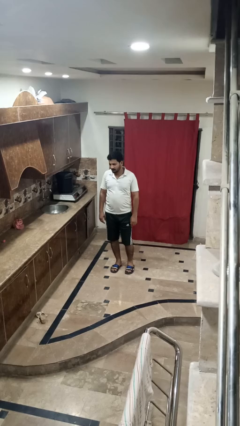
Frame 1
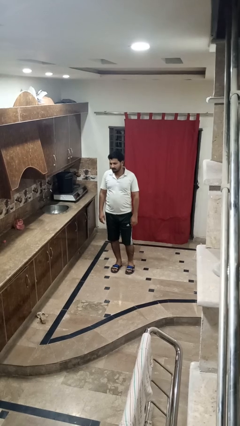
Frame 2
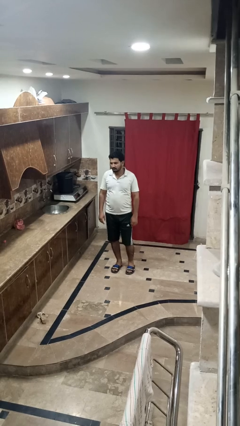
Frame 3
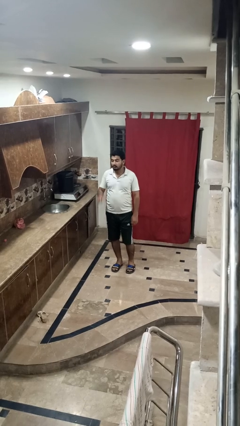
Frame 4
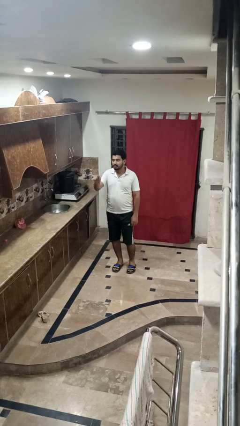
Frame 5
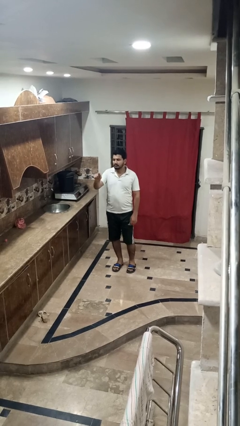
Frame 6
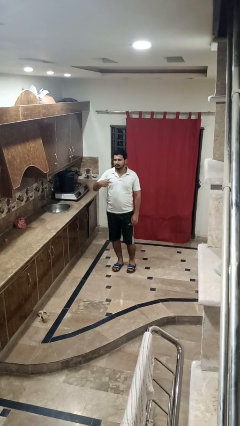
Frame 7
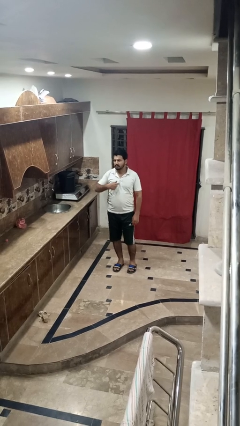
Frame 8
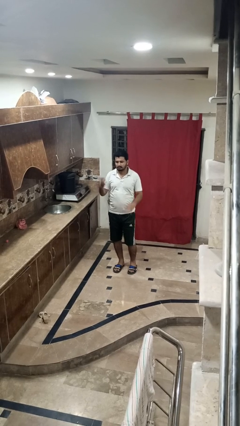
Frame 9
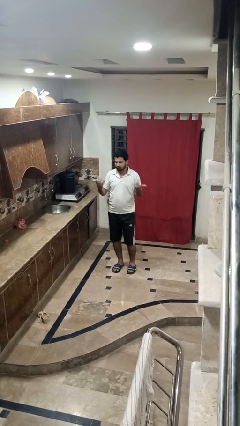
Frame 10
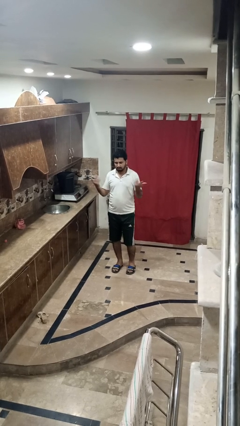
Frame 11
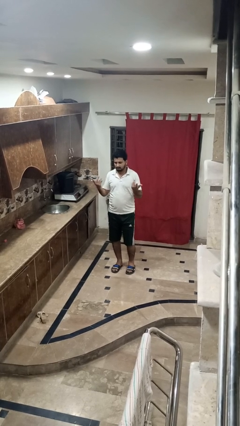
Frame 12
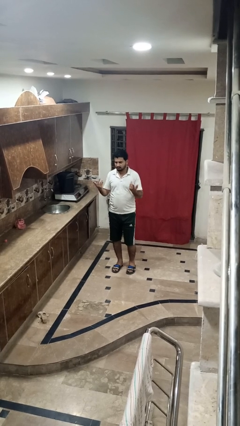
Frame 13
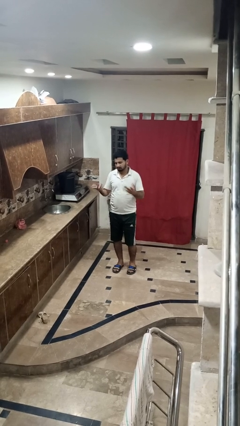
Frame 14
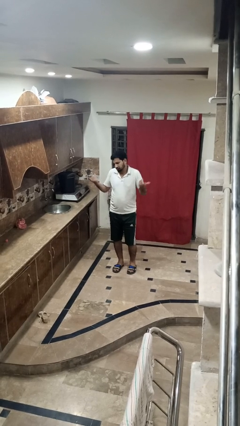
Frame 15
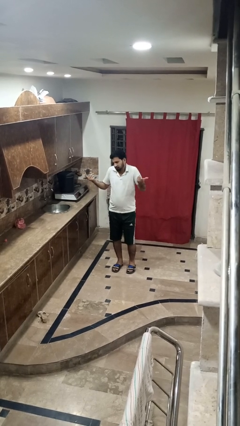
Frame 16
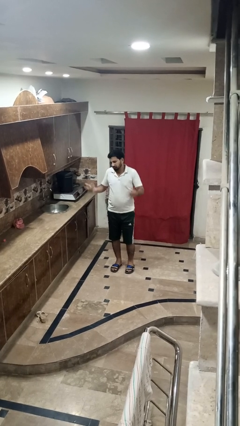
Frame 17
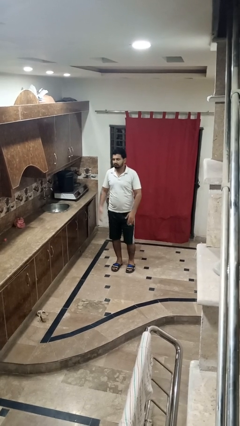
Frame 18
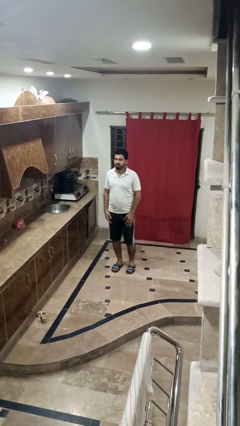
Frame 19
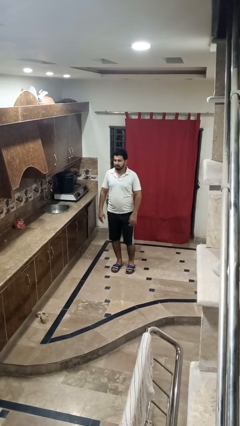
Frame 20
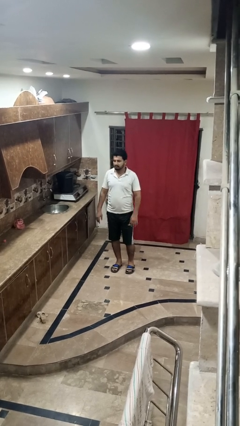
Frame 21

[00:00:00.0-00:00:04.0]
person shrugs

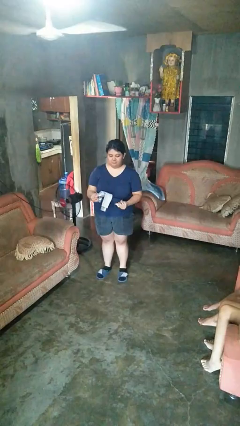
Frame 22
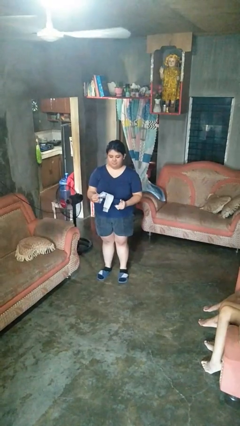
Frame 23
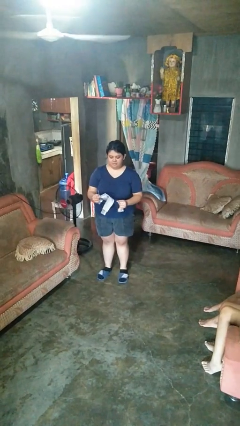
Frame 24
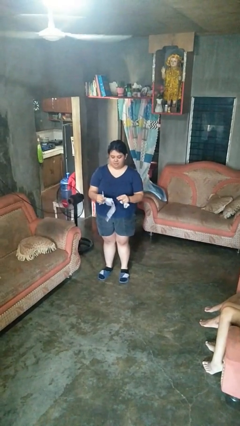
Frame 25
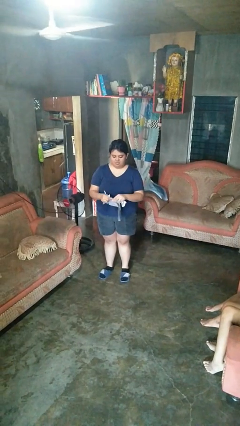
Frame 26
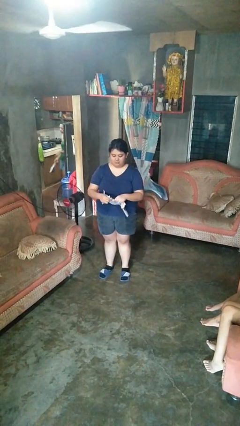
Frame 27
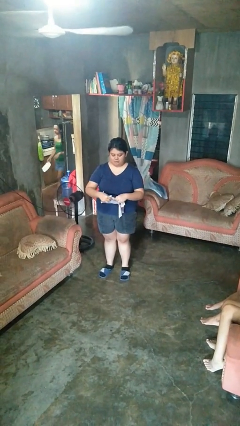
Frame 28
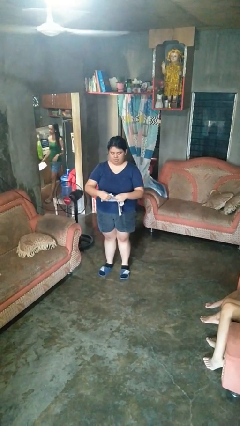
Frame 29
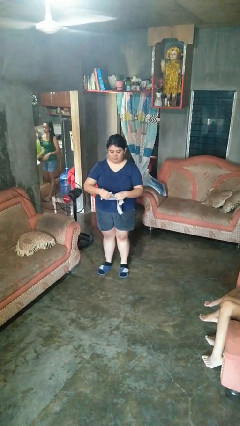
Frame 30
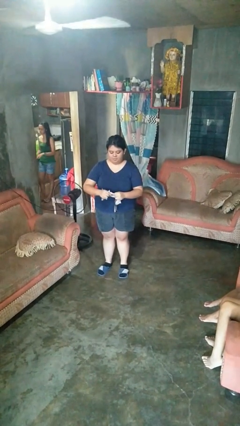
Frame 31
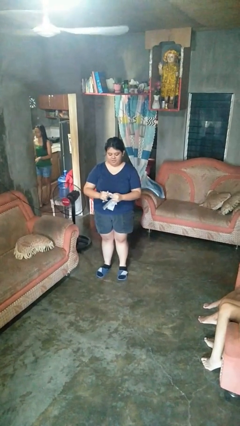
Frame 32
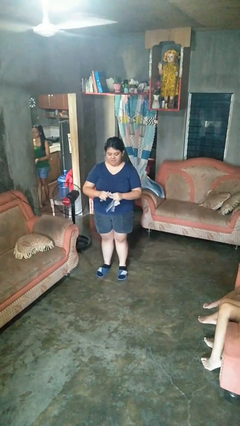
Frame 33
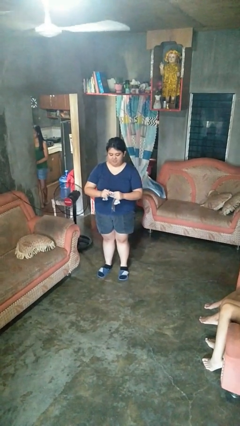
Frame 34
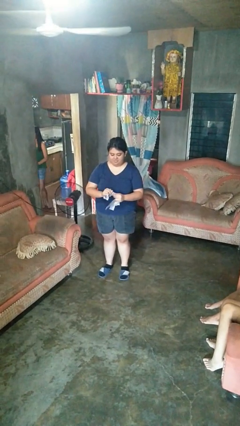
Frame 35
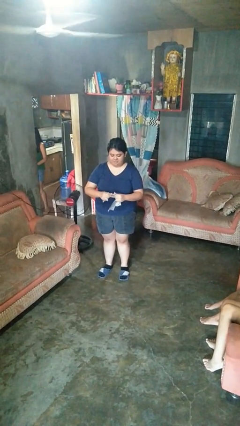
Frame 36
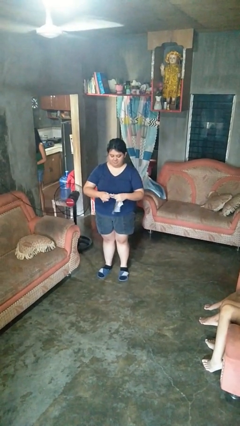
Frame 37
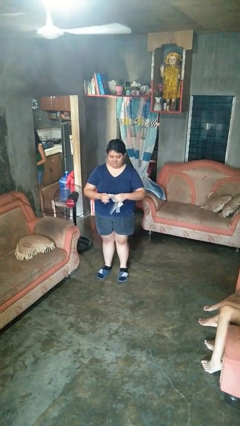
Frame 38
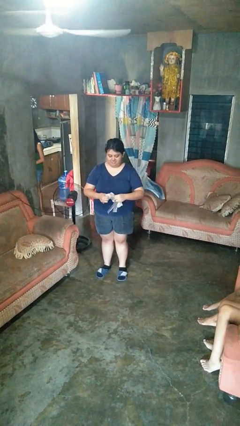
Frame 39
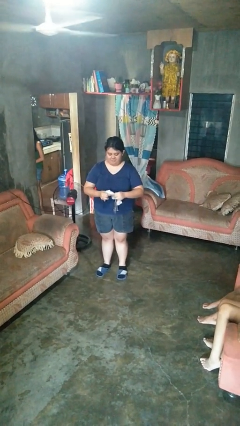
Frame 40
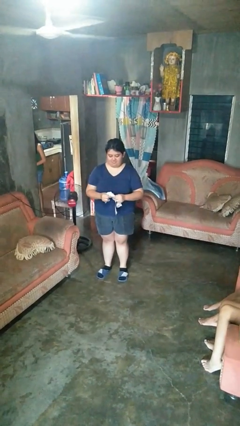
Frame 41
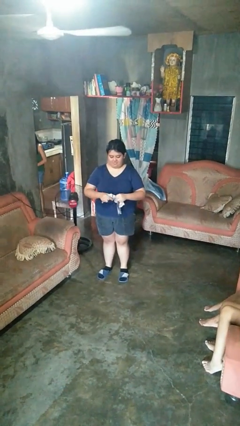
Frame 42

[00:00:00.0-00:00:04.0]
person tears paper

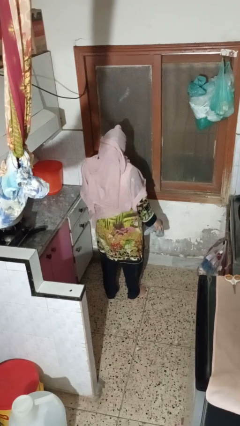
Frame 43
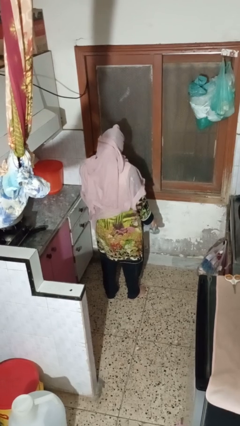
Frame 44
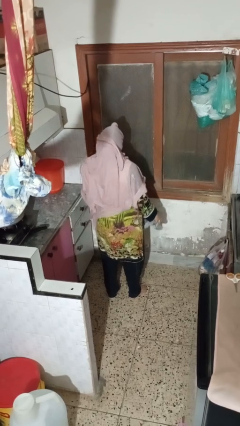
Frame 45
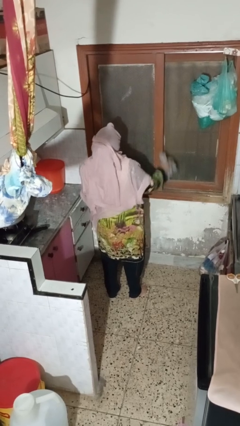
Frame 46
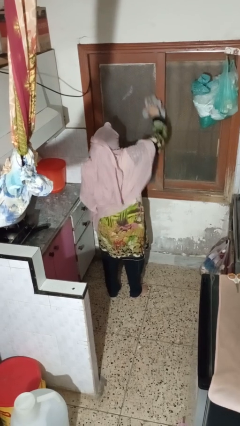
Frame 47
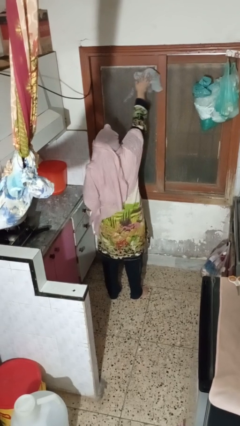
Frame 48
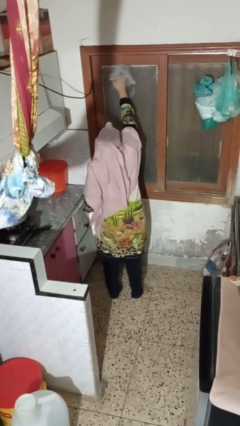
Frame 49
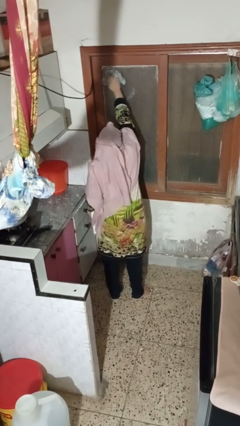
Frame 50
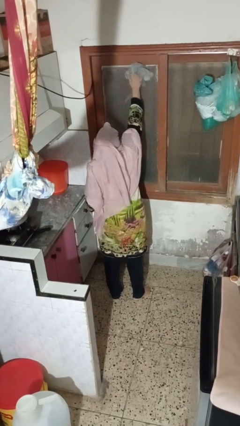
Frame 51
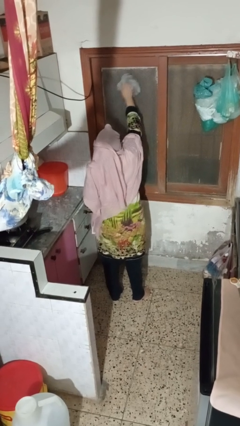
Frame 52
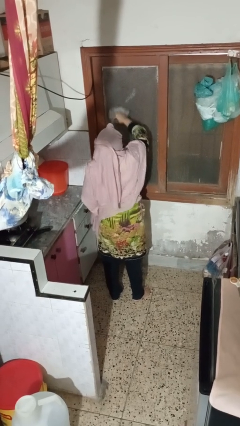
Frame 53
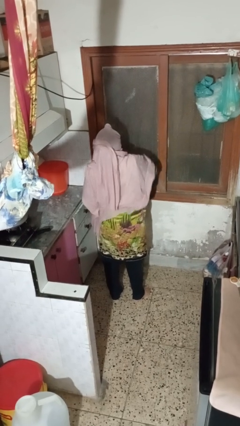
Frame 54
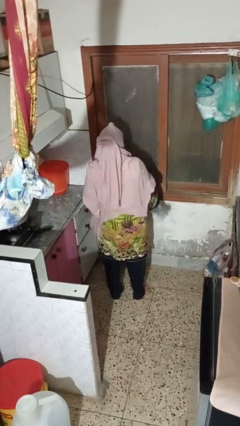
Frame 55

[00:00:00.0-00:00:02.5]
person washes window

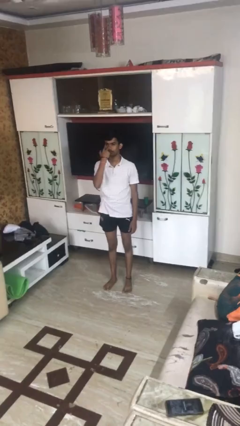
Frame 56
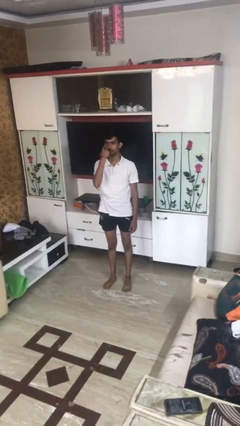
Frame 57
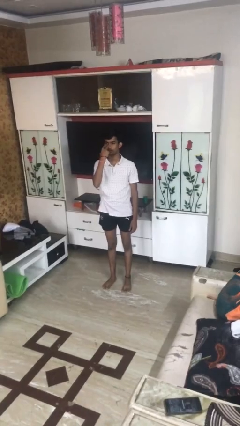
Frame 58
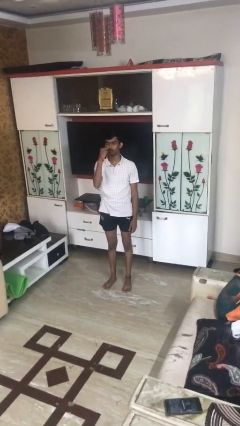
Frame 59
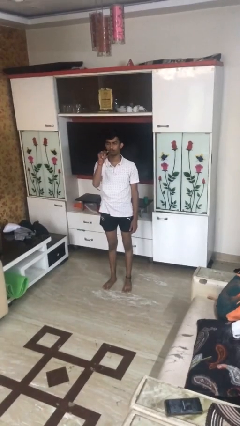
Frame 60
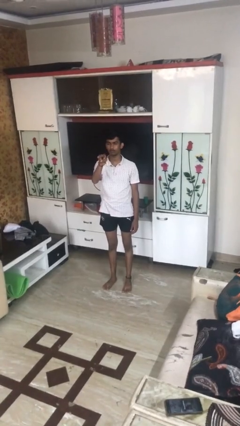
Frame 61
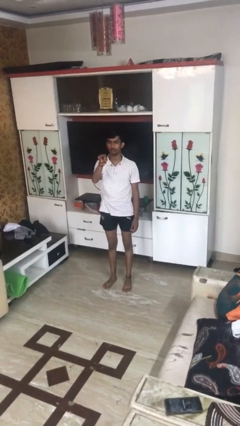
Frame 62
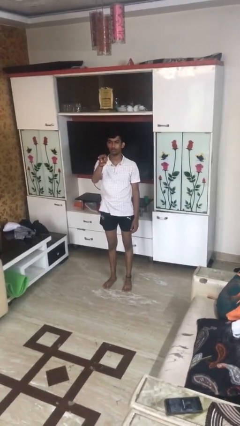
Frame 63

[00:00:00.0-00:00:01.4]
person gestures watch closely

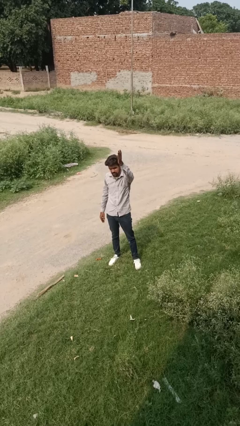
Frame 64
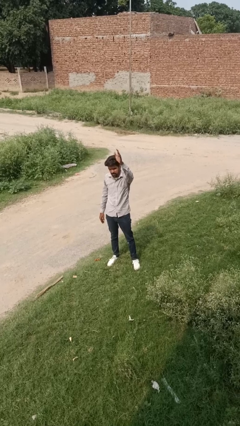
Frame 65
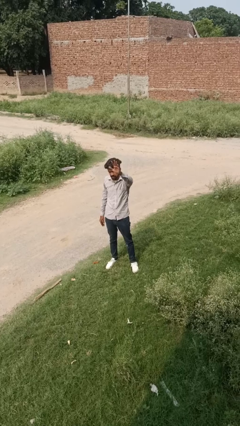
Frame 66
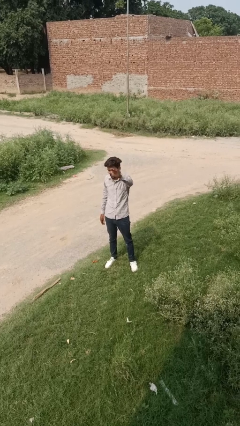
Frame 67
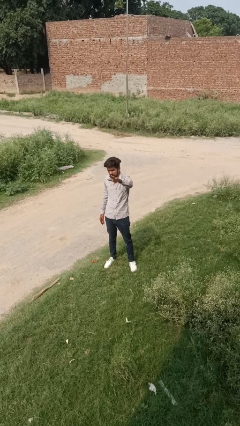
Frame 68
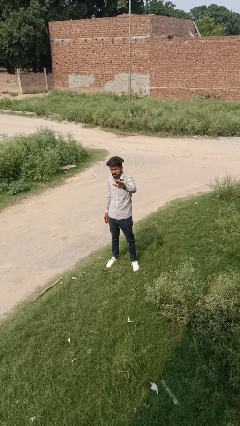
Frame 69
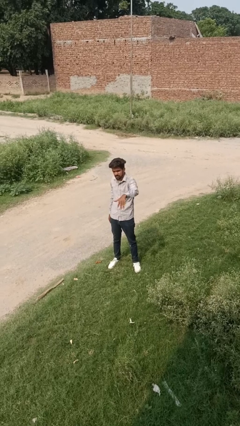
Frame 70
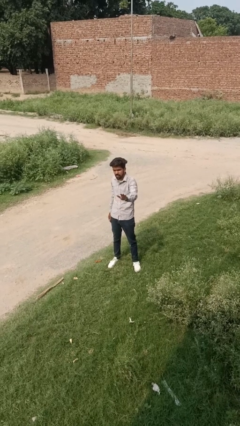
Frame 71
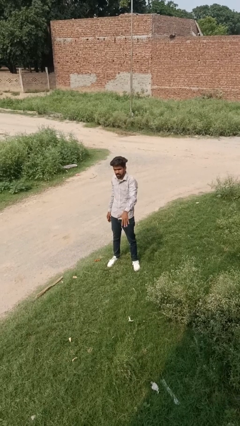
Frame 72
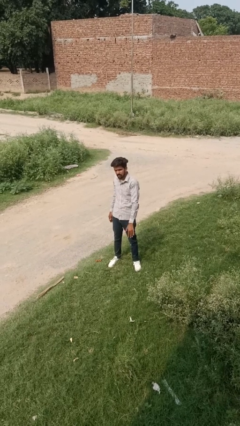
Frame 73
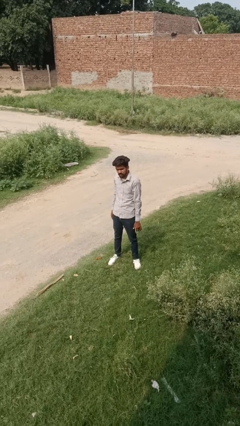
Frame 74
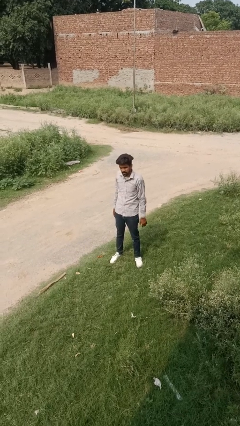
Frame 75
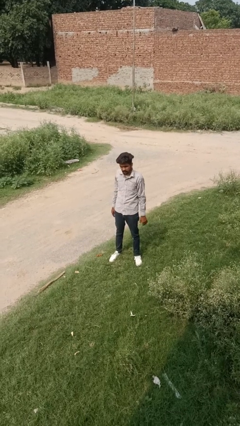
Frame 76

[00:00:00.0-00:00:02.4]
person gestures swipe down

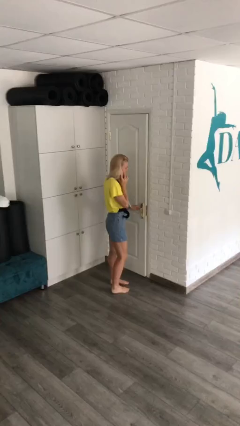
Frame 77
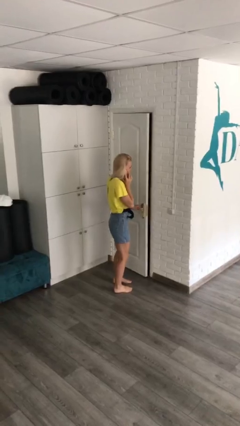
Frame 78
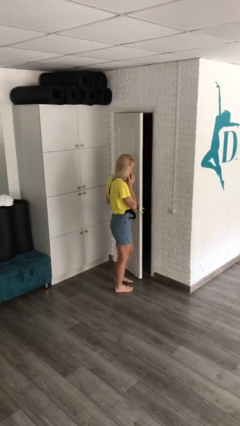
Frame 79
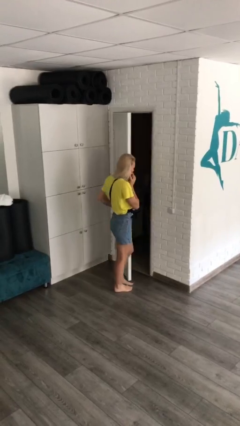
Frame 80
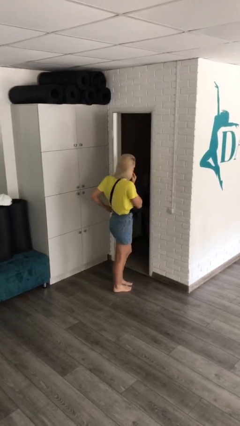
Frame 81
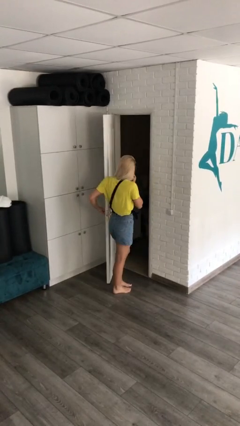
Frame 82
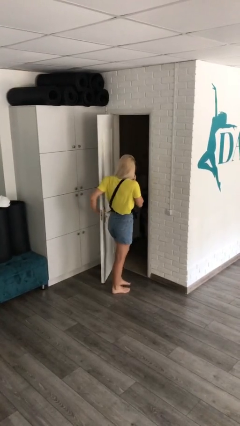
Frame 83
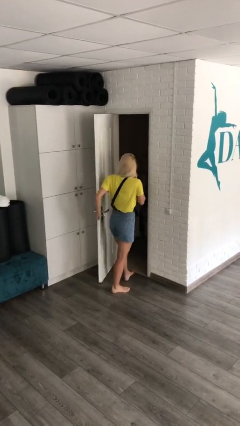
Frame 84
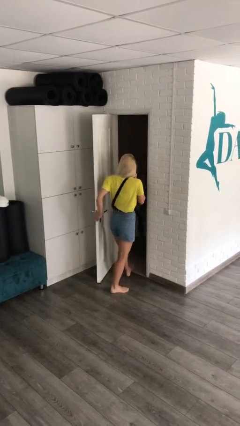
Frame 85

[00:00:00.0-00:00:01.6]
person opens facility door

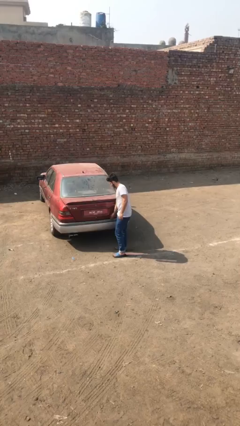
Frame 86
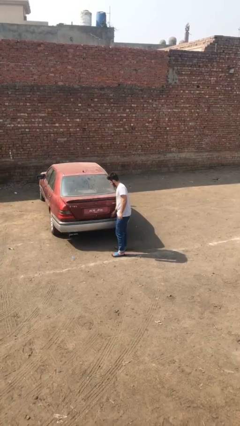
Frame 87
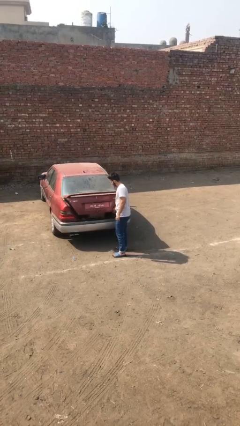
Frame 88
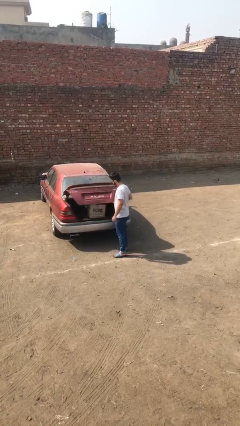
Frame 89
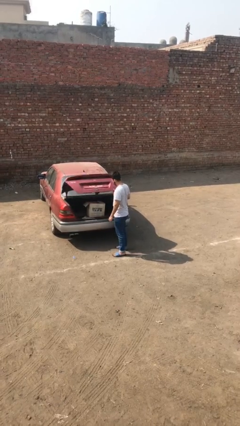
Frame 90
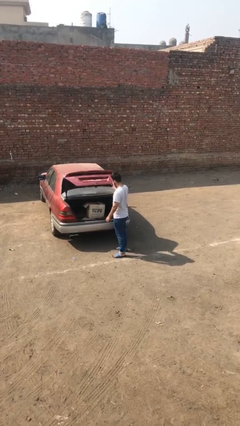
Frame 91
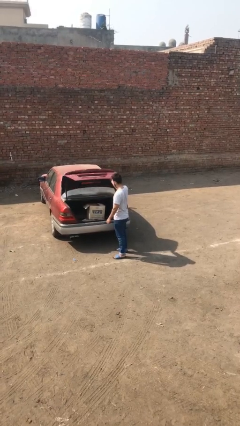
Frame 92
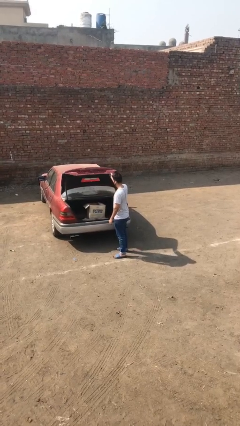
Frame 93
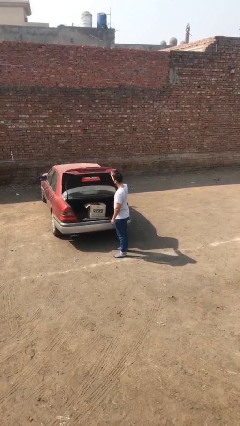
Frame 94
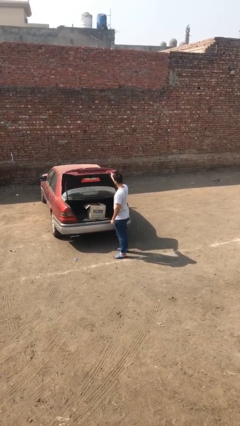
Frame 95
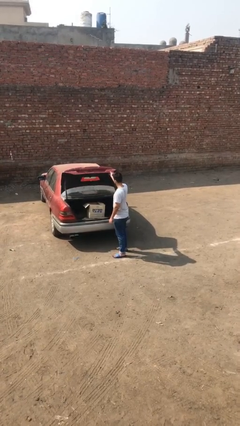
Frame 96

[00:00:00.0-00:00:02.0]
person opens car trunk
